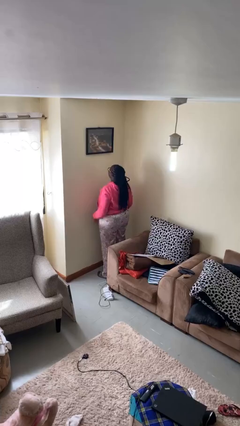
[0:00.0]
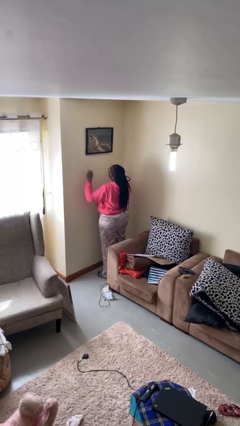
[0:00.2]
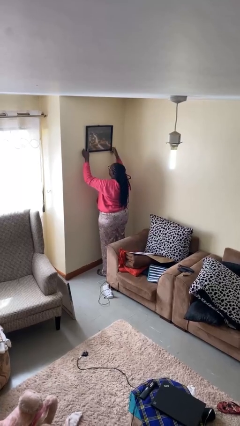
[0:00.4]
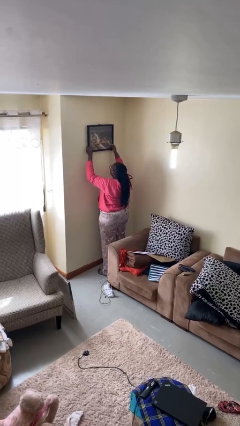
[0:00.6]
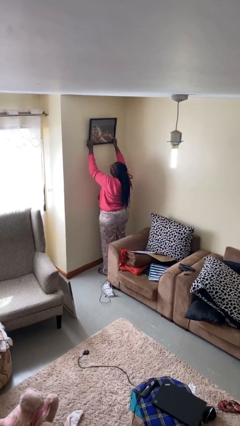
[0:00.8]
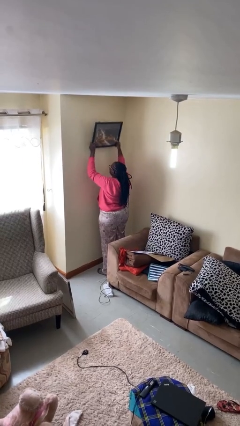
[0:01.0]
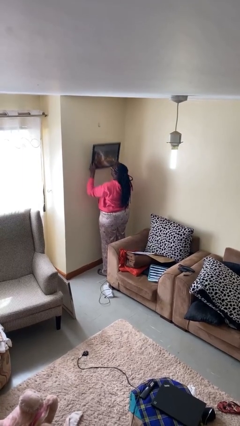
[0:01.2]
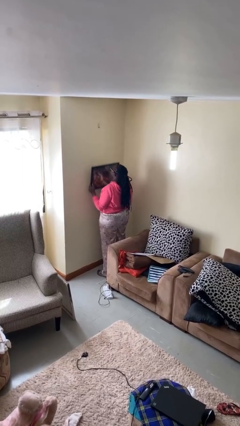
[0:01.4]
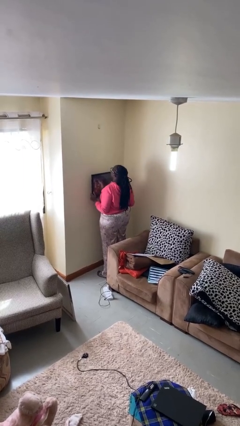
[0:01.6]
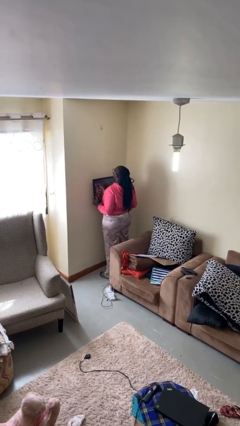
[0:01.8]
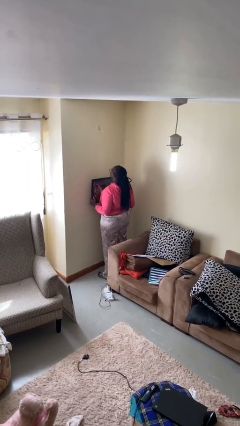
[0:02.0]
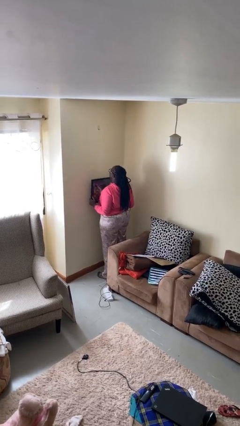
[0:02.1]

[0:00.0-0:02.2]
person takes down picture frame

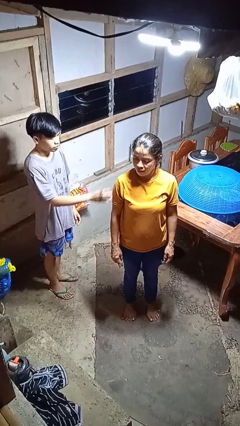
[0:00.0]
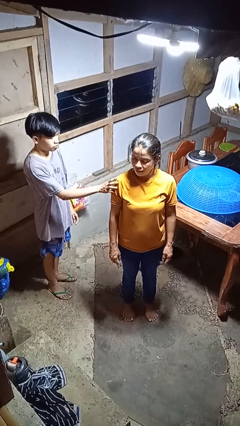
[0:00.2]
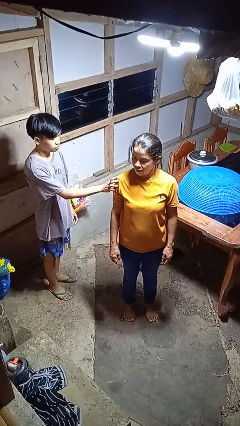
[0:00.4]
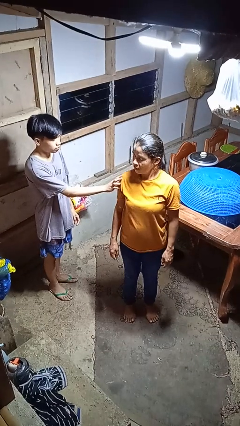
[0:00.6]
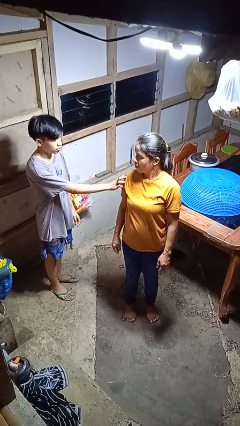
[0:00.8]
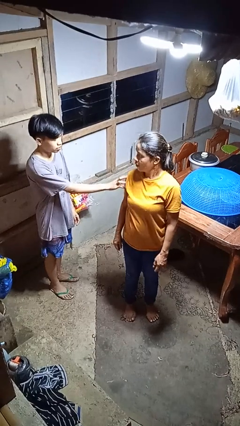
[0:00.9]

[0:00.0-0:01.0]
person grabs person by forearm

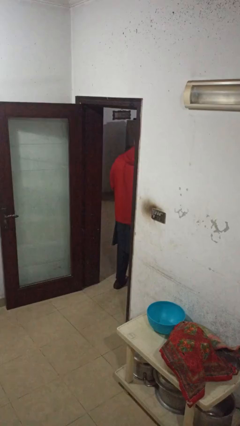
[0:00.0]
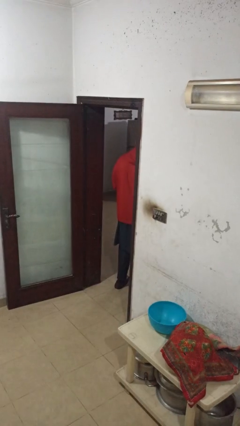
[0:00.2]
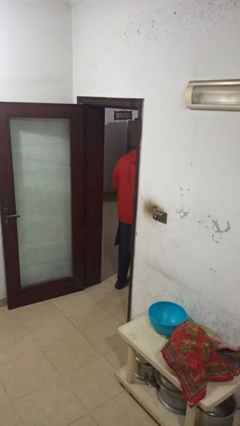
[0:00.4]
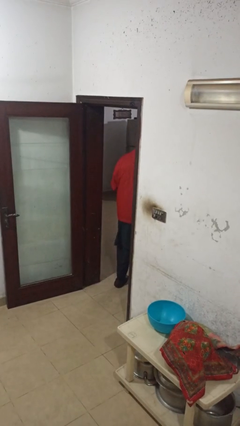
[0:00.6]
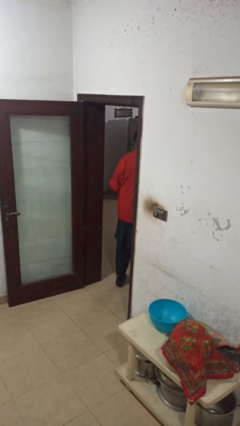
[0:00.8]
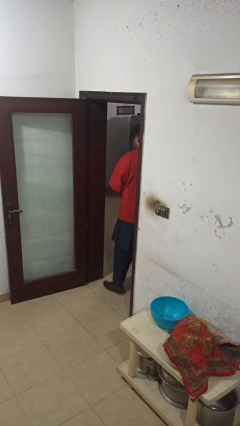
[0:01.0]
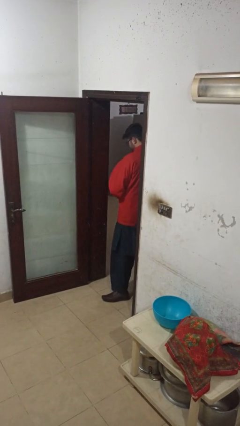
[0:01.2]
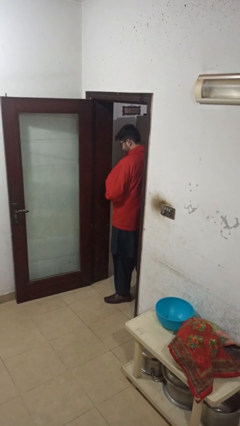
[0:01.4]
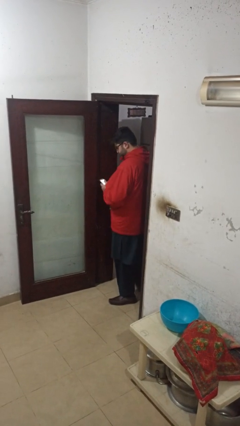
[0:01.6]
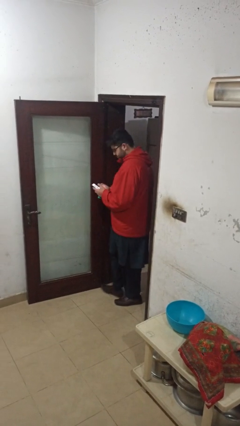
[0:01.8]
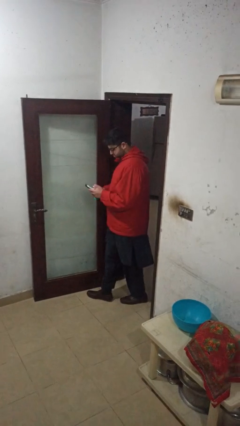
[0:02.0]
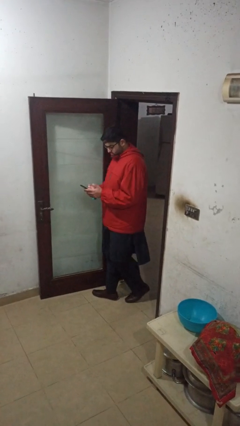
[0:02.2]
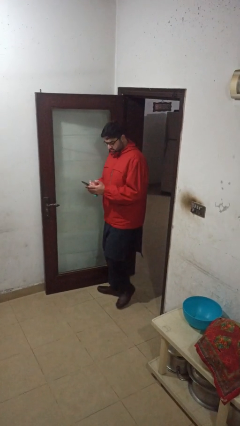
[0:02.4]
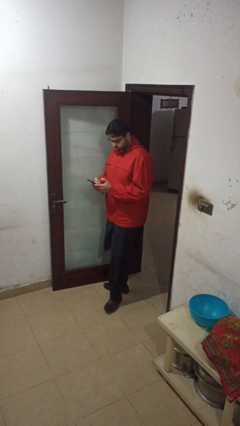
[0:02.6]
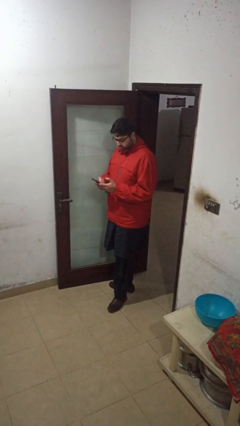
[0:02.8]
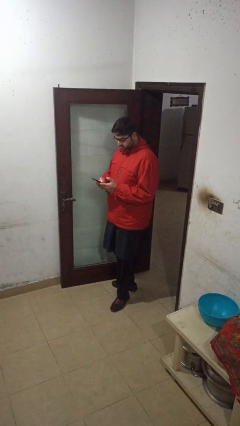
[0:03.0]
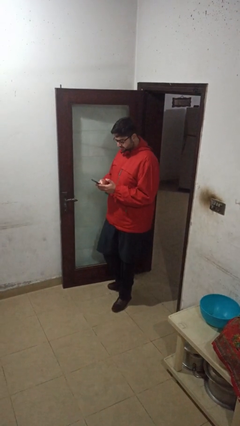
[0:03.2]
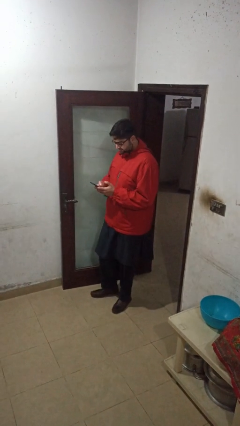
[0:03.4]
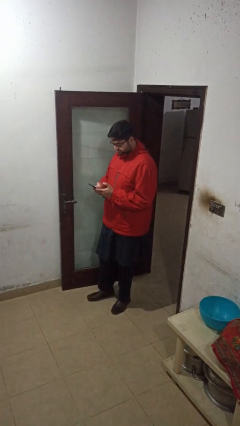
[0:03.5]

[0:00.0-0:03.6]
person enters scene through structure

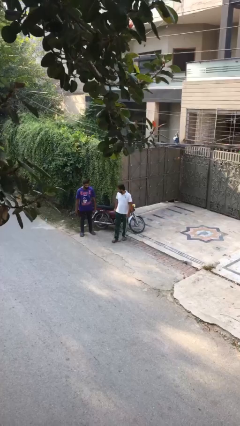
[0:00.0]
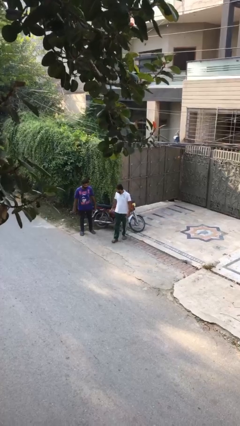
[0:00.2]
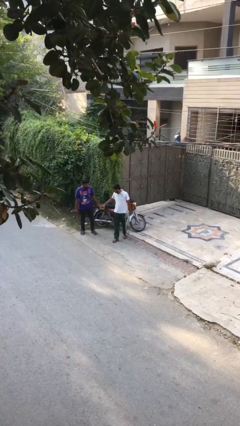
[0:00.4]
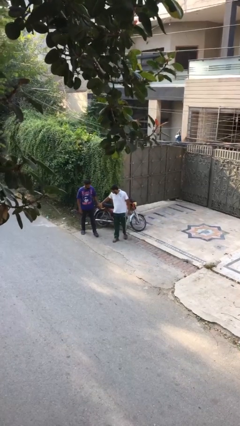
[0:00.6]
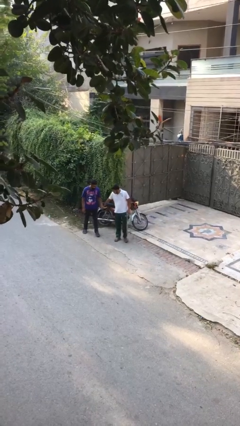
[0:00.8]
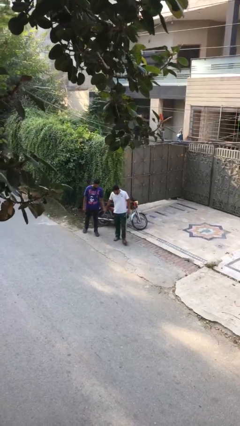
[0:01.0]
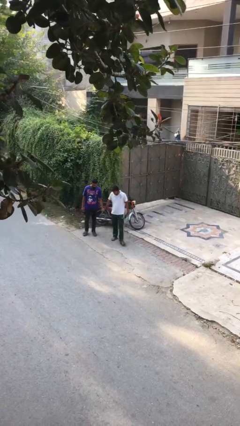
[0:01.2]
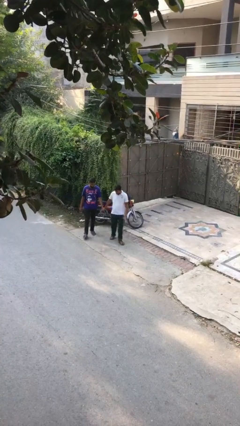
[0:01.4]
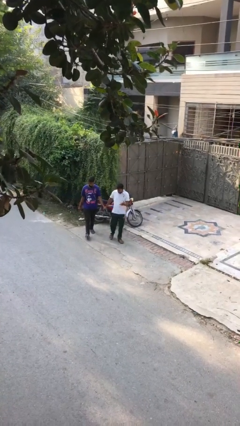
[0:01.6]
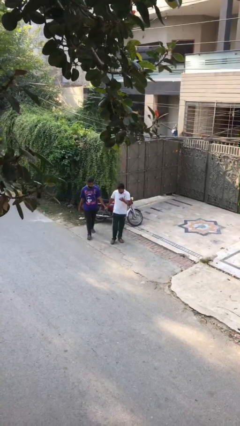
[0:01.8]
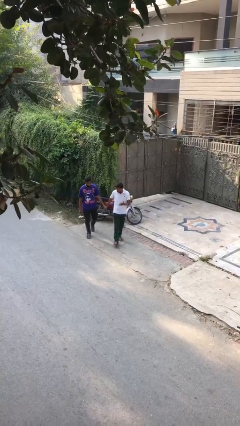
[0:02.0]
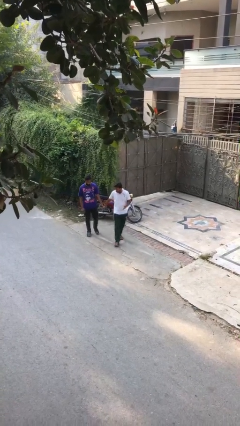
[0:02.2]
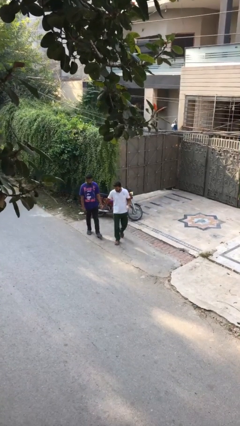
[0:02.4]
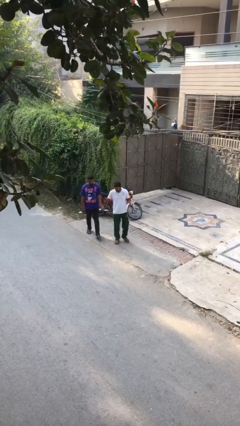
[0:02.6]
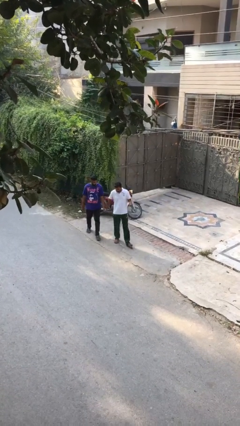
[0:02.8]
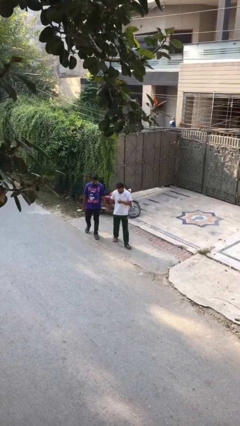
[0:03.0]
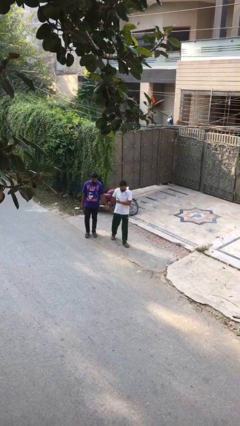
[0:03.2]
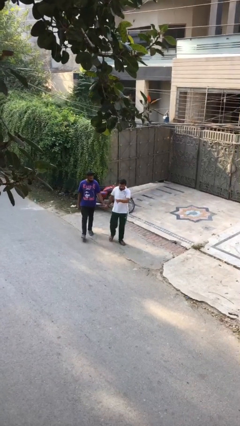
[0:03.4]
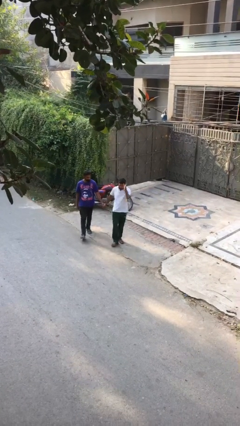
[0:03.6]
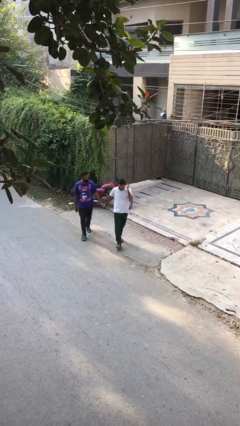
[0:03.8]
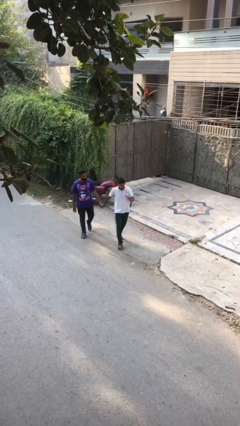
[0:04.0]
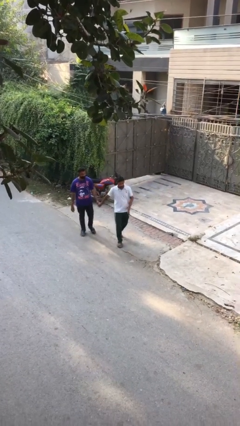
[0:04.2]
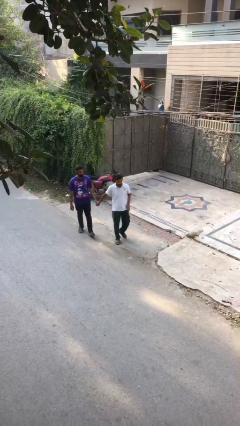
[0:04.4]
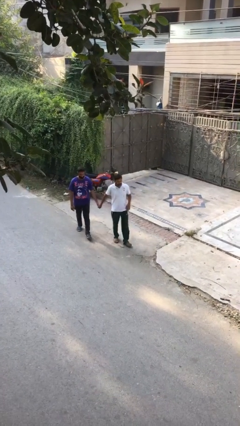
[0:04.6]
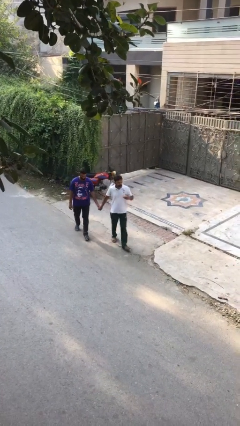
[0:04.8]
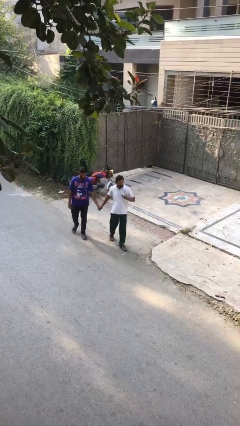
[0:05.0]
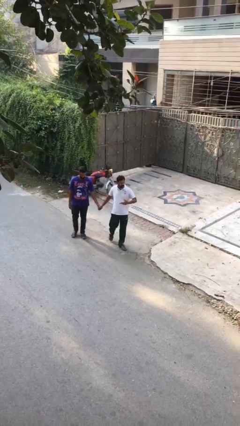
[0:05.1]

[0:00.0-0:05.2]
person holds hand

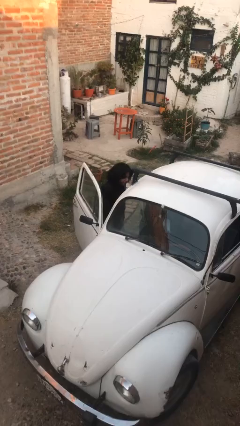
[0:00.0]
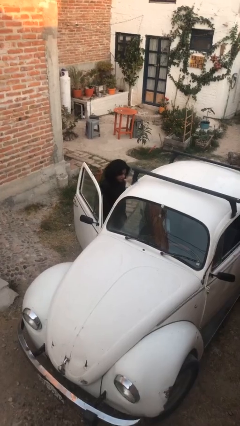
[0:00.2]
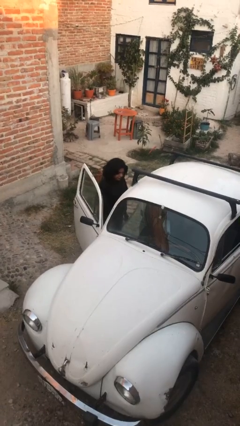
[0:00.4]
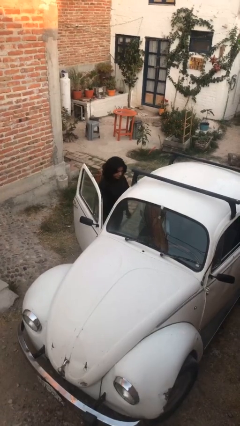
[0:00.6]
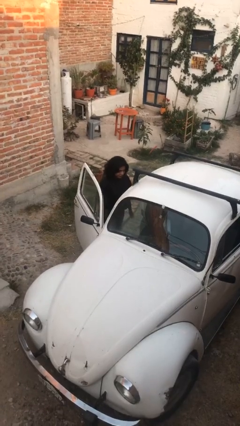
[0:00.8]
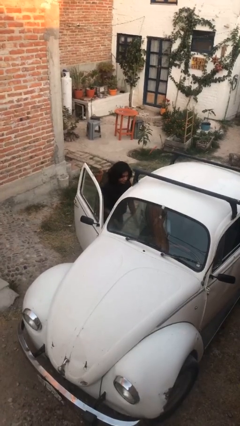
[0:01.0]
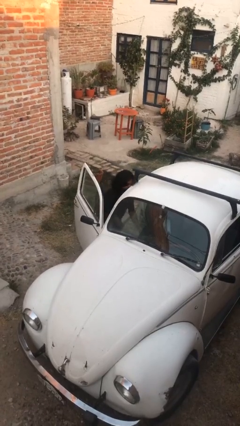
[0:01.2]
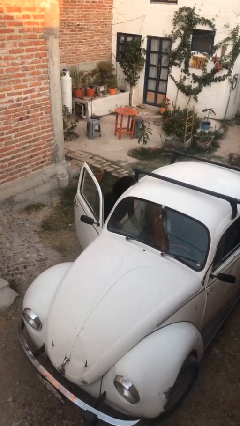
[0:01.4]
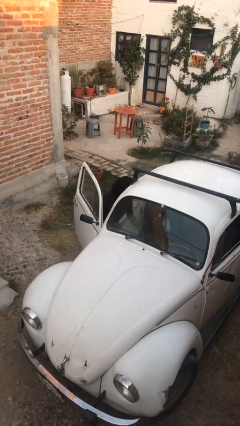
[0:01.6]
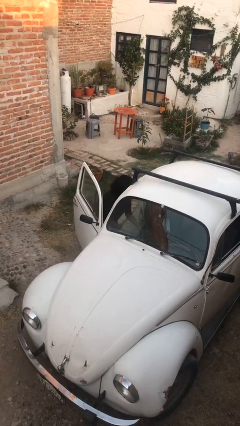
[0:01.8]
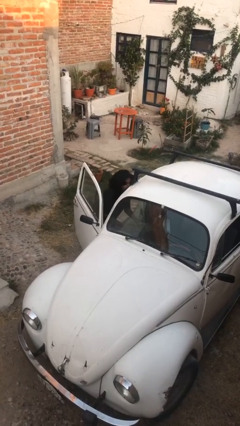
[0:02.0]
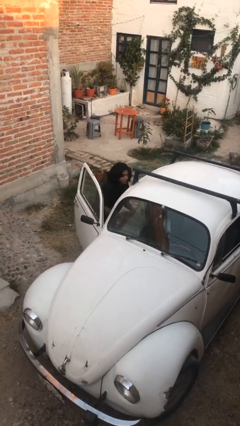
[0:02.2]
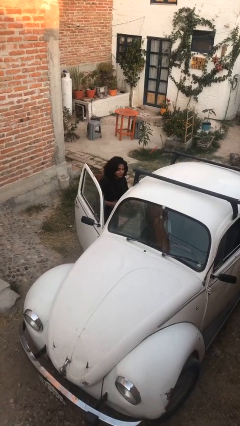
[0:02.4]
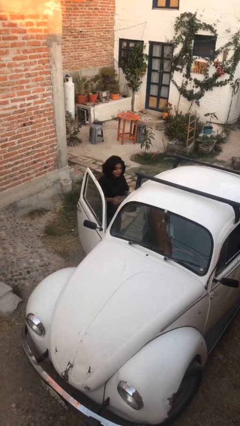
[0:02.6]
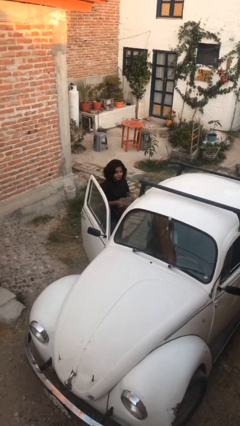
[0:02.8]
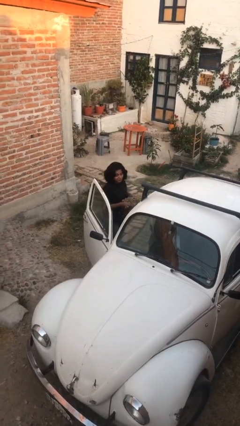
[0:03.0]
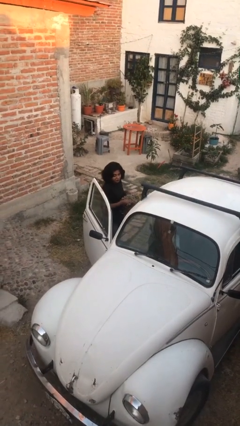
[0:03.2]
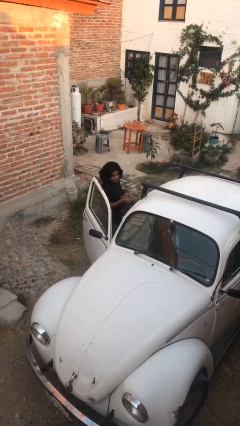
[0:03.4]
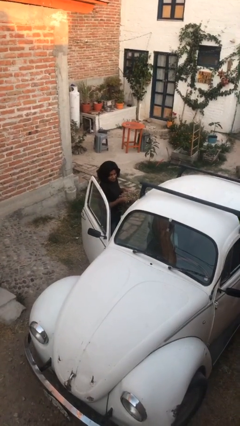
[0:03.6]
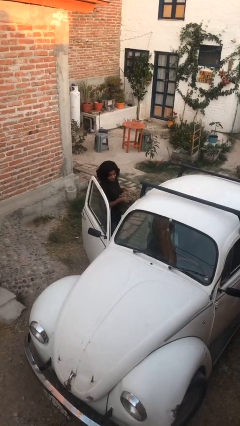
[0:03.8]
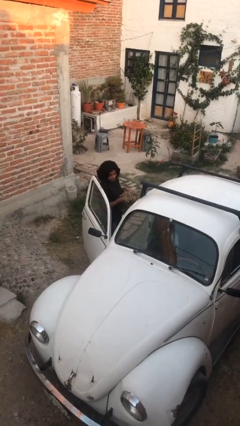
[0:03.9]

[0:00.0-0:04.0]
person unloads car

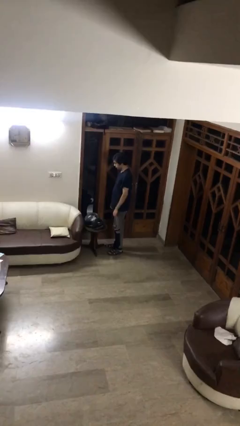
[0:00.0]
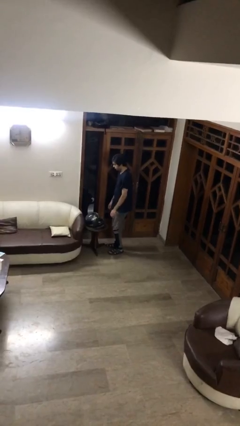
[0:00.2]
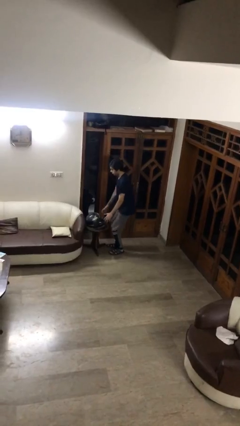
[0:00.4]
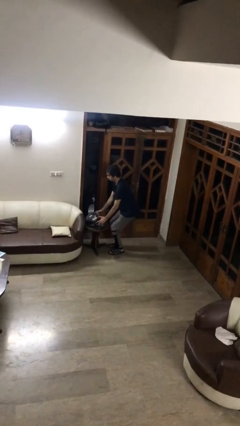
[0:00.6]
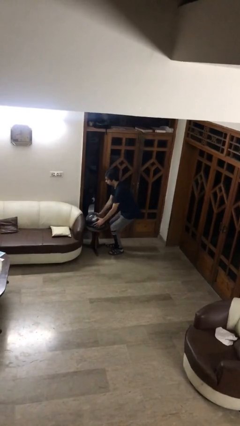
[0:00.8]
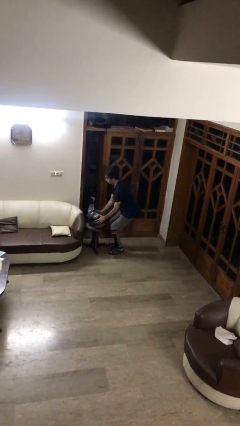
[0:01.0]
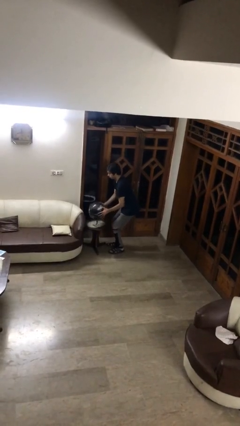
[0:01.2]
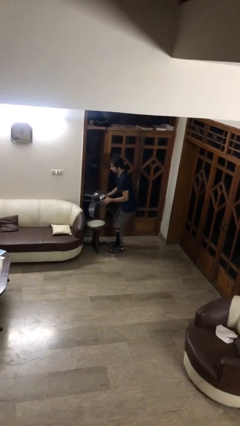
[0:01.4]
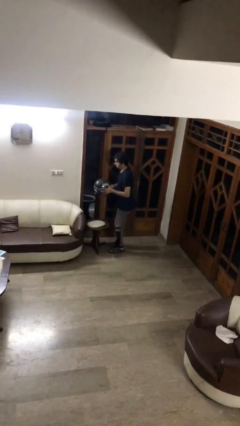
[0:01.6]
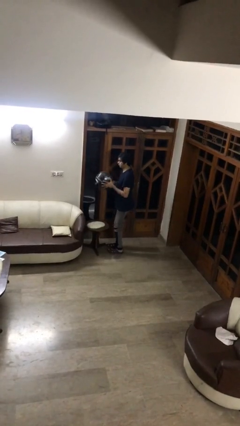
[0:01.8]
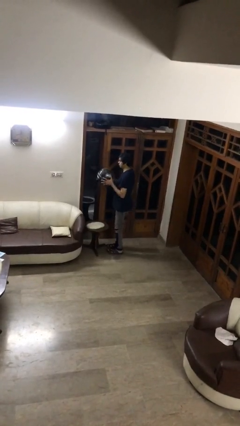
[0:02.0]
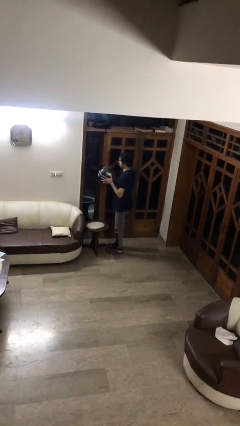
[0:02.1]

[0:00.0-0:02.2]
person picks up object from table
